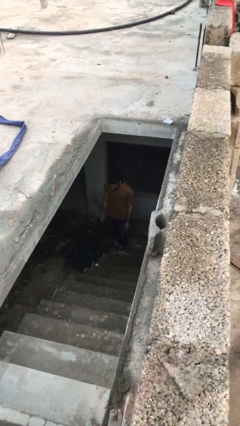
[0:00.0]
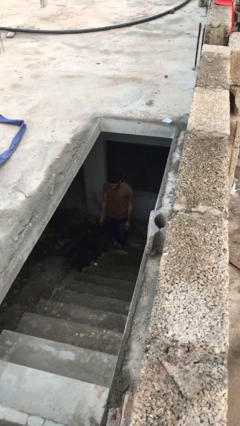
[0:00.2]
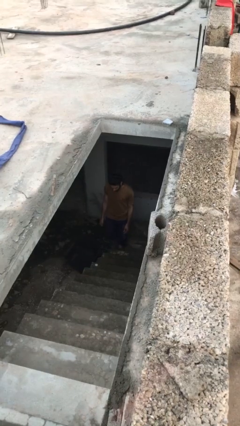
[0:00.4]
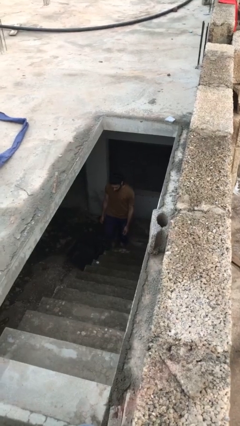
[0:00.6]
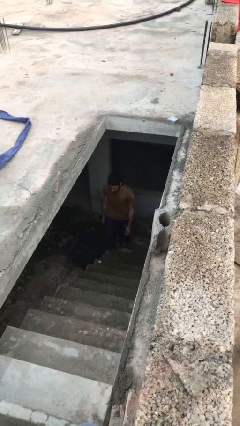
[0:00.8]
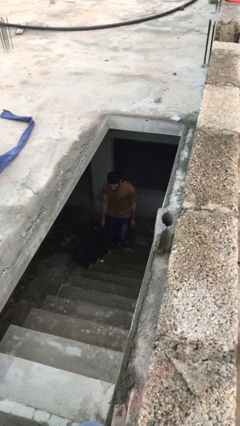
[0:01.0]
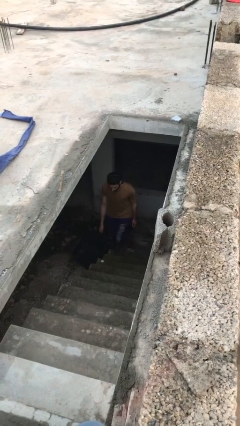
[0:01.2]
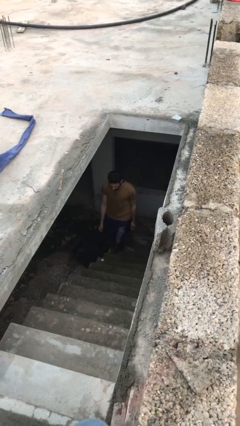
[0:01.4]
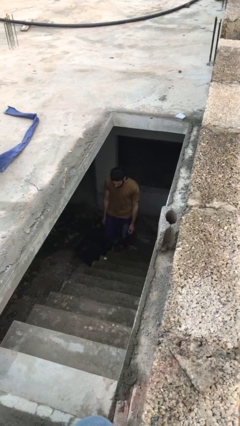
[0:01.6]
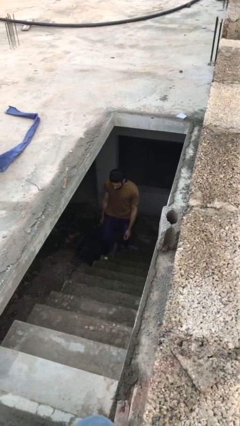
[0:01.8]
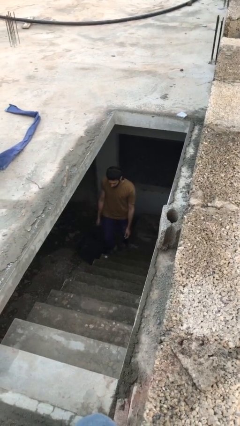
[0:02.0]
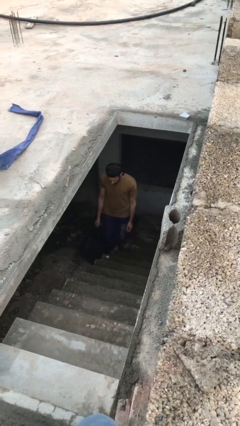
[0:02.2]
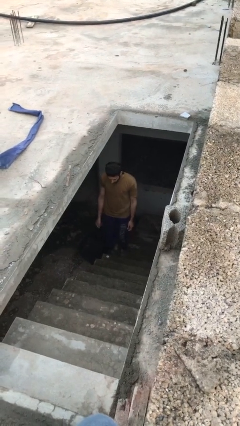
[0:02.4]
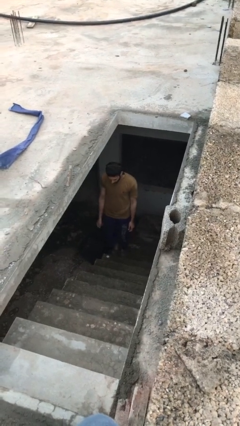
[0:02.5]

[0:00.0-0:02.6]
person climbs up stairs

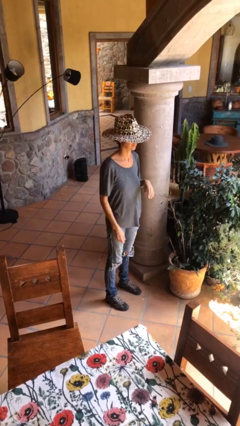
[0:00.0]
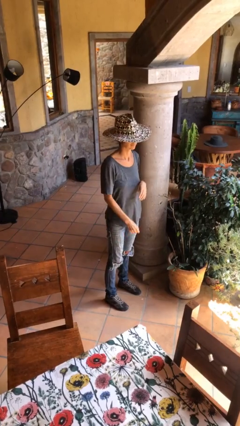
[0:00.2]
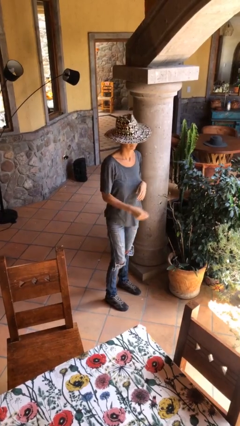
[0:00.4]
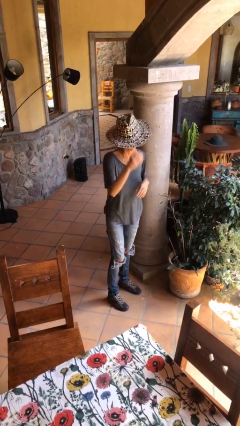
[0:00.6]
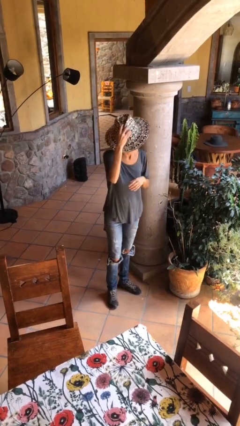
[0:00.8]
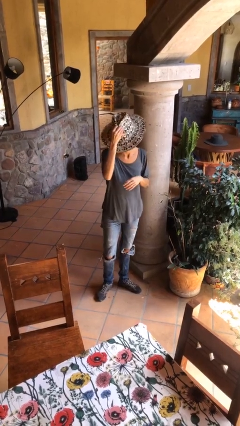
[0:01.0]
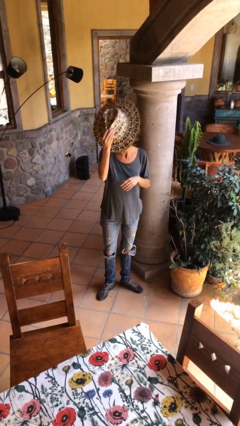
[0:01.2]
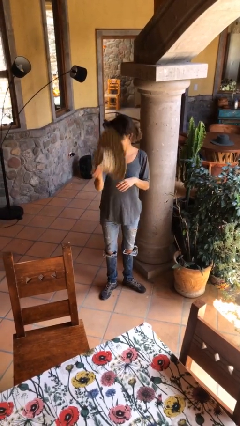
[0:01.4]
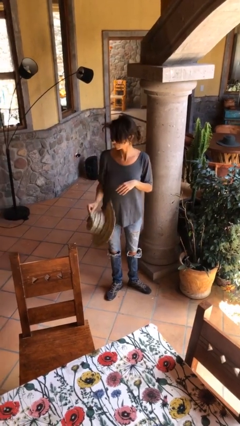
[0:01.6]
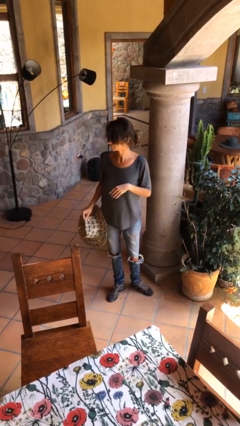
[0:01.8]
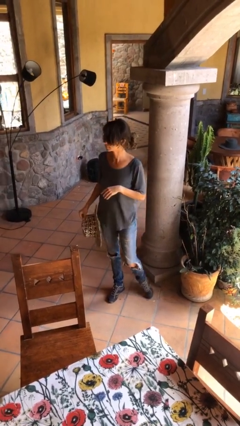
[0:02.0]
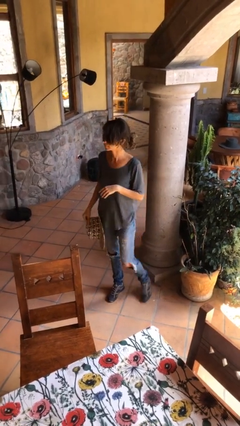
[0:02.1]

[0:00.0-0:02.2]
person takes off hat

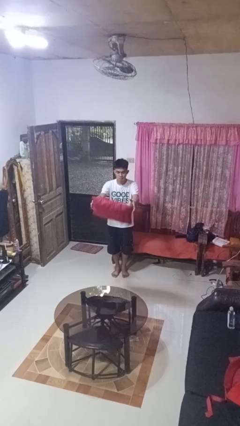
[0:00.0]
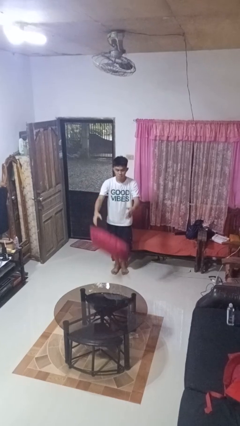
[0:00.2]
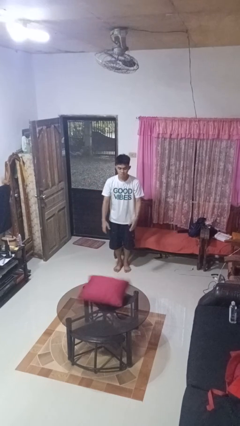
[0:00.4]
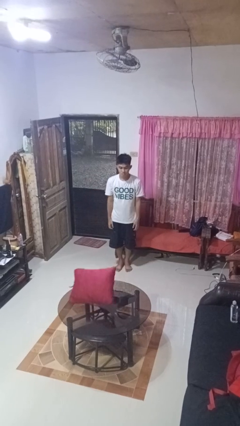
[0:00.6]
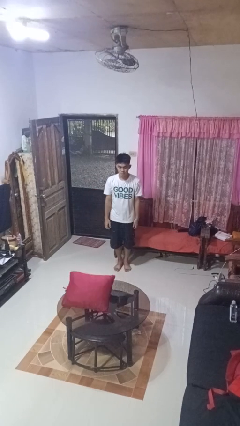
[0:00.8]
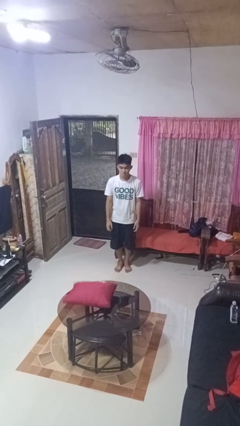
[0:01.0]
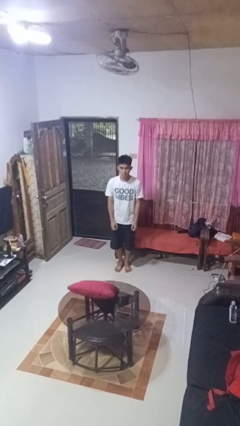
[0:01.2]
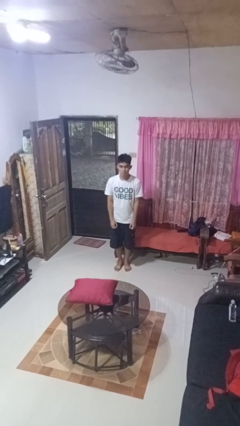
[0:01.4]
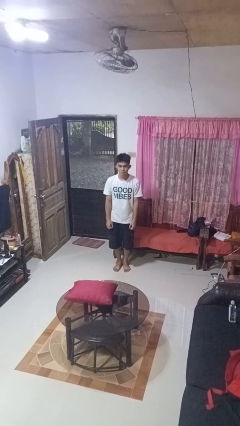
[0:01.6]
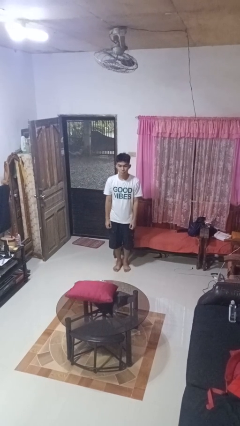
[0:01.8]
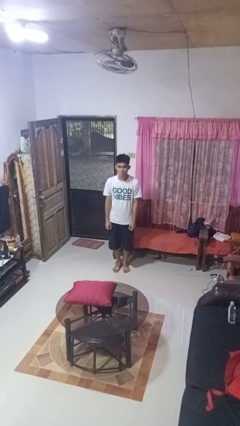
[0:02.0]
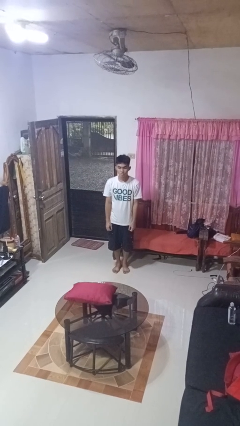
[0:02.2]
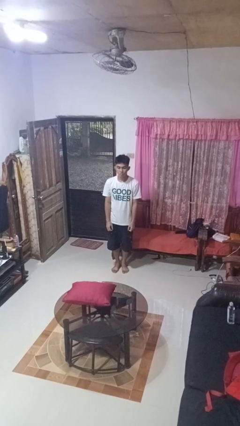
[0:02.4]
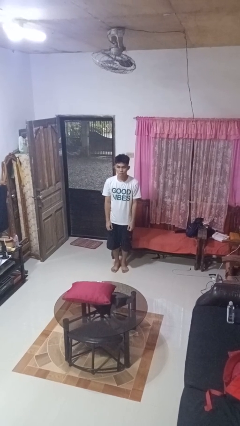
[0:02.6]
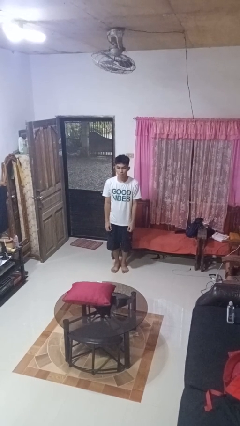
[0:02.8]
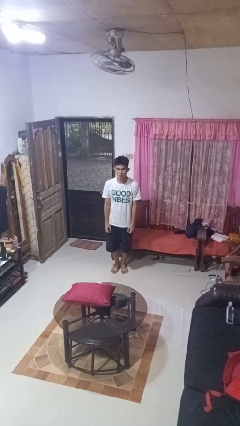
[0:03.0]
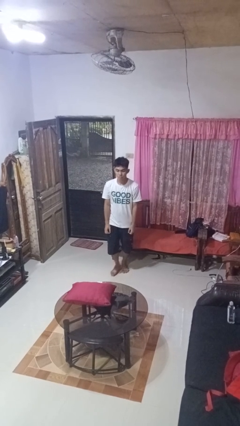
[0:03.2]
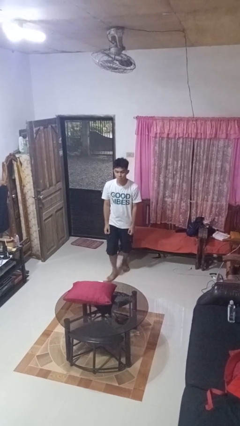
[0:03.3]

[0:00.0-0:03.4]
person throws object on table

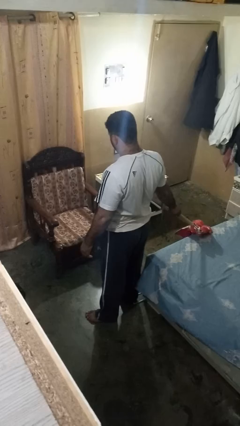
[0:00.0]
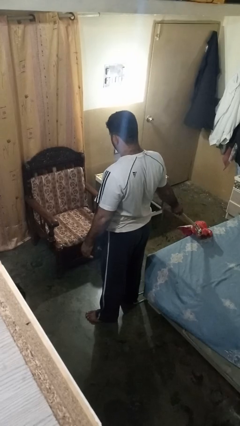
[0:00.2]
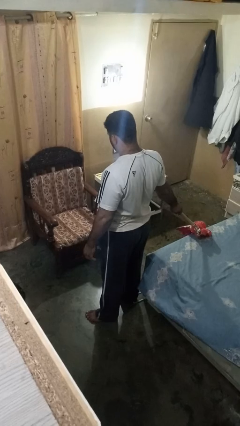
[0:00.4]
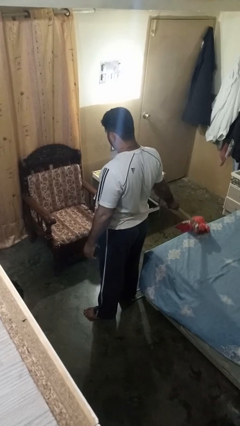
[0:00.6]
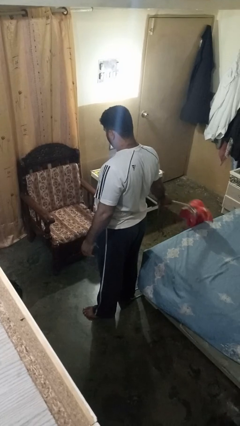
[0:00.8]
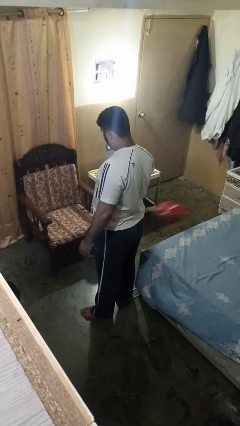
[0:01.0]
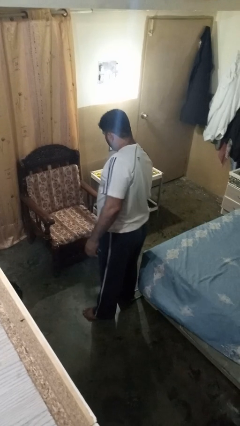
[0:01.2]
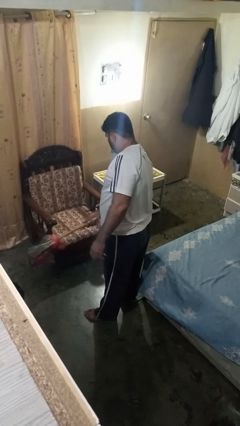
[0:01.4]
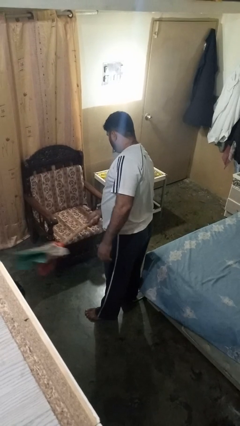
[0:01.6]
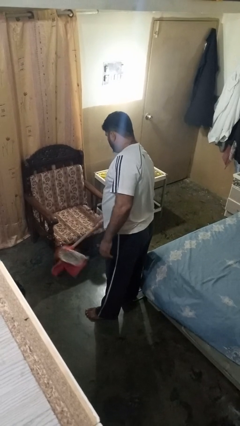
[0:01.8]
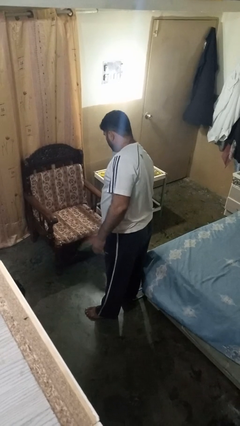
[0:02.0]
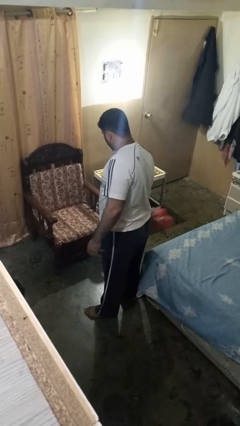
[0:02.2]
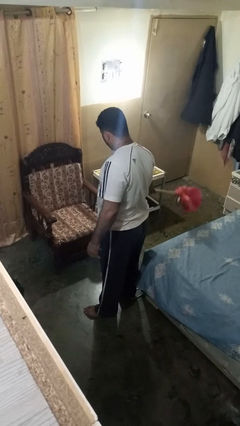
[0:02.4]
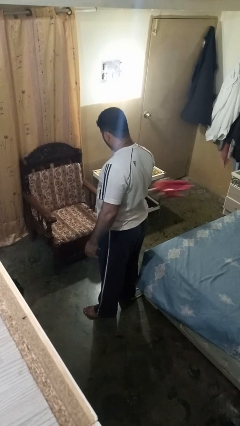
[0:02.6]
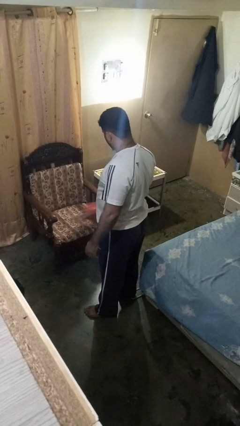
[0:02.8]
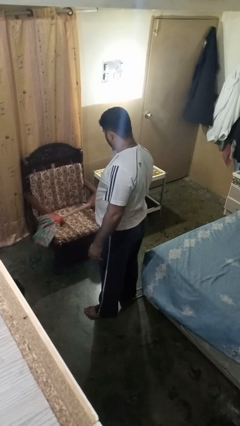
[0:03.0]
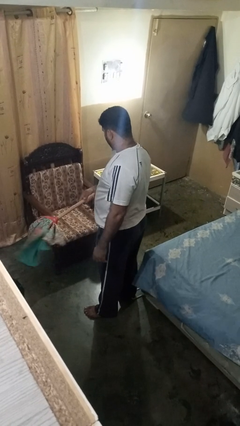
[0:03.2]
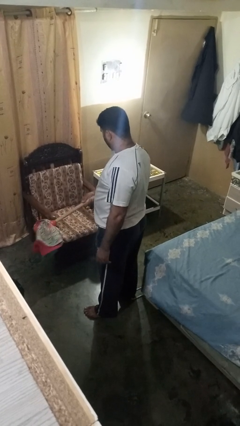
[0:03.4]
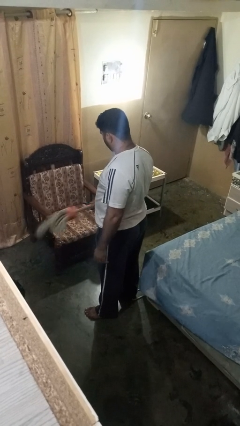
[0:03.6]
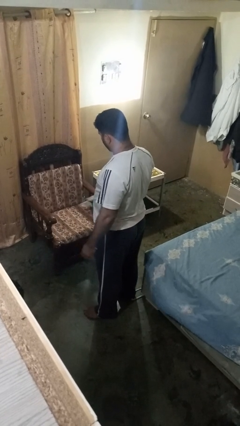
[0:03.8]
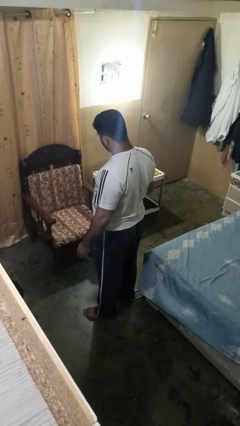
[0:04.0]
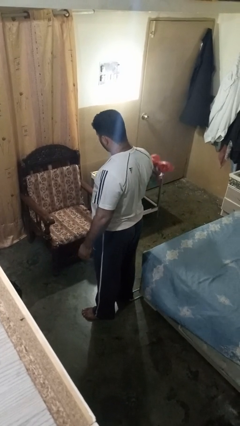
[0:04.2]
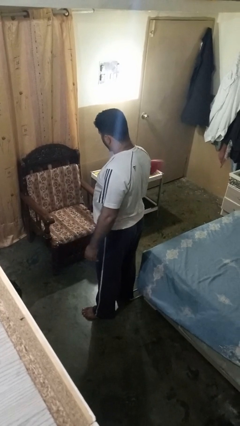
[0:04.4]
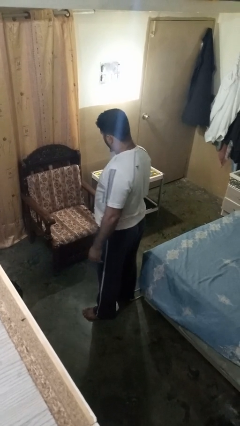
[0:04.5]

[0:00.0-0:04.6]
person dusts furniture

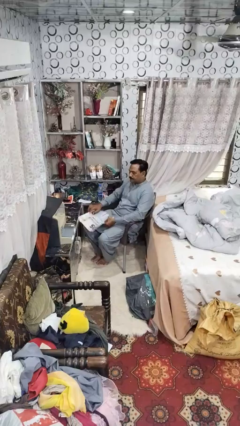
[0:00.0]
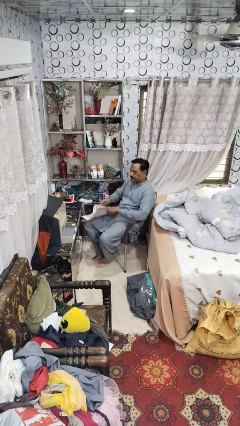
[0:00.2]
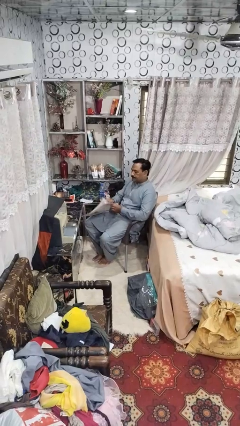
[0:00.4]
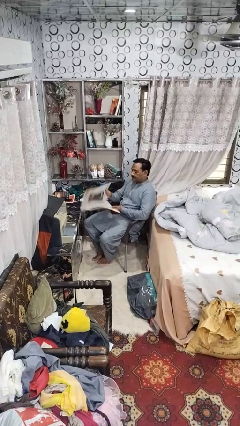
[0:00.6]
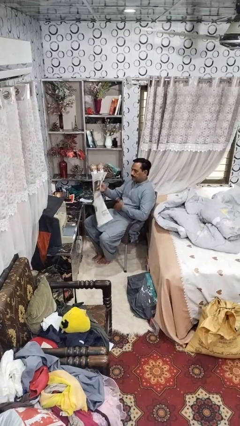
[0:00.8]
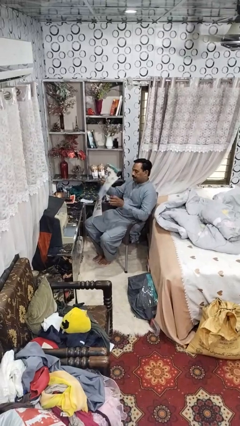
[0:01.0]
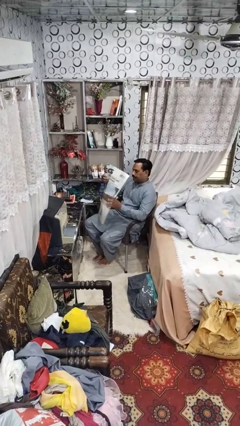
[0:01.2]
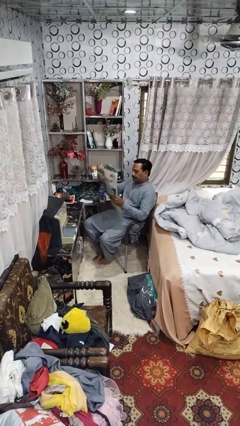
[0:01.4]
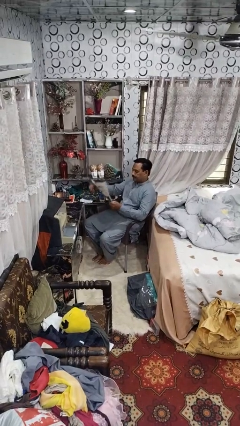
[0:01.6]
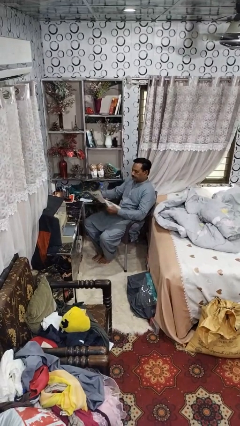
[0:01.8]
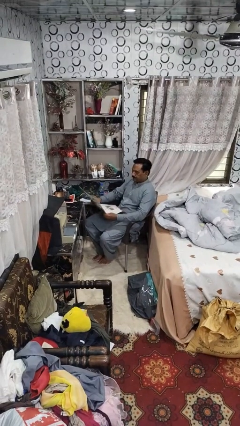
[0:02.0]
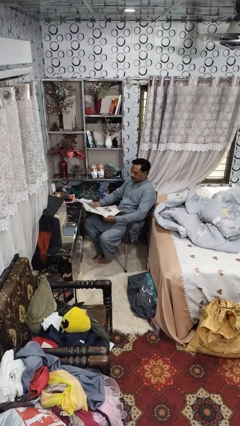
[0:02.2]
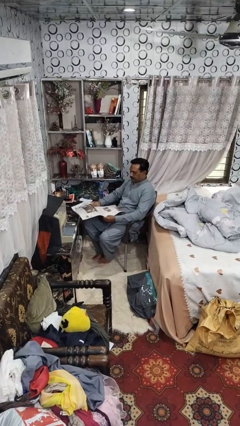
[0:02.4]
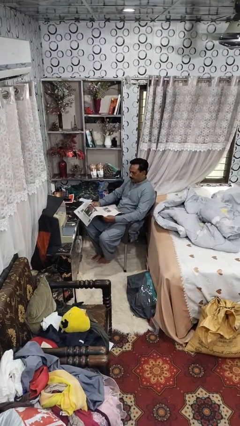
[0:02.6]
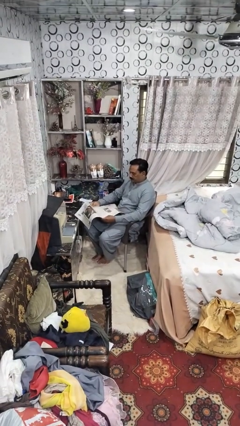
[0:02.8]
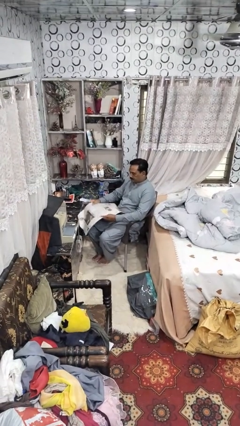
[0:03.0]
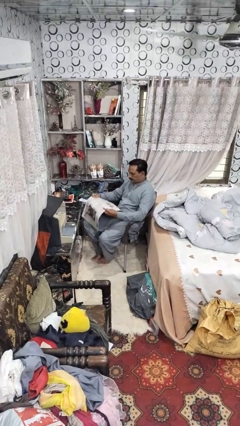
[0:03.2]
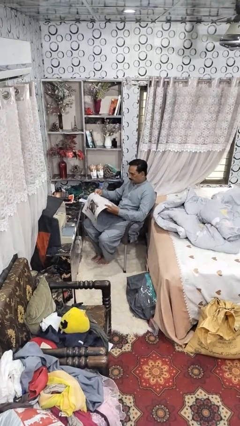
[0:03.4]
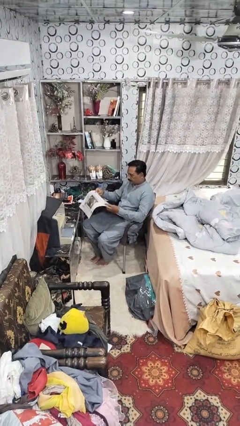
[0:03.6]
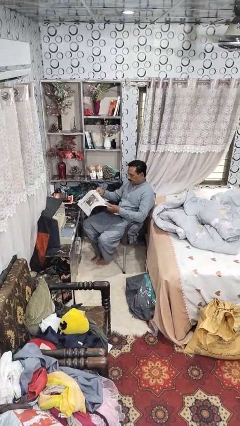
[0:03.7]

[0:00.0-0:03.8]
person reads newspaper

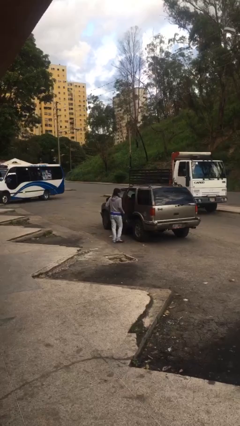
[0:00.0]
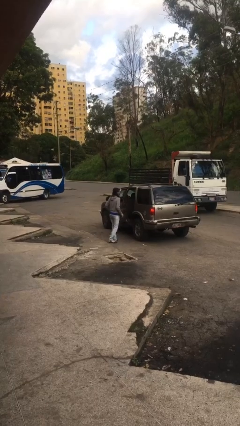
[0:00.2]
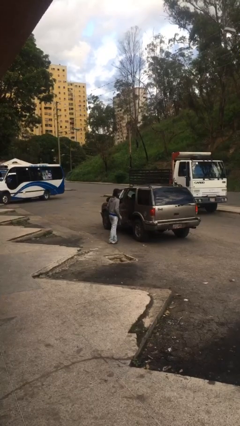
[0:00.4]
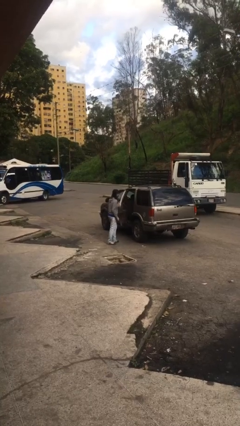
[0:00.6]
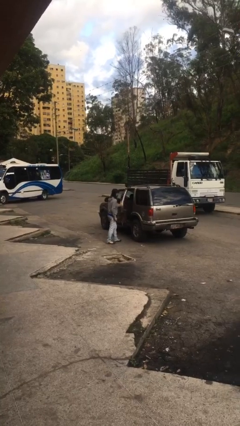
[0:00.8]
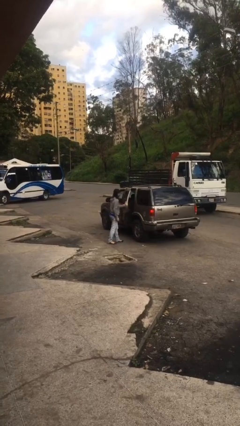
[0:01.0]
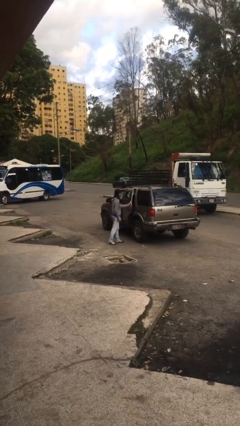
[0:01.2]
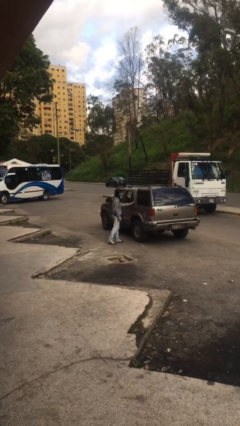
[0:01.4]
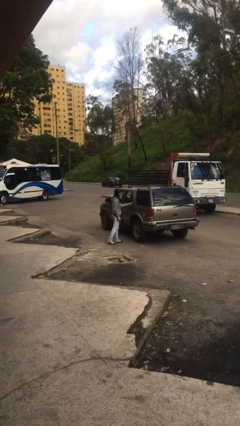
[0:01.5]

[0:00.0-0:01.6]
person closes car door
